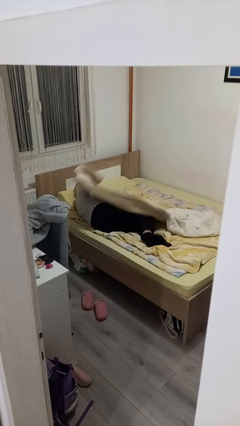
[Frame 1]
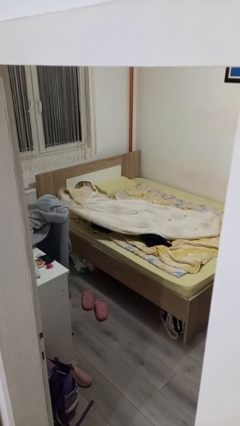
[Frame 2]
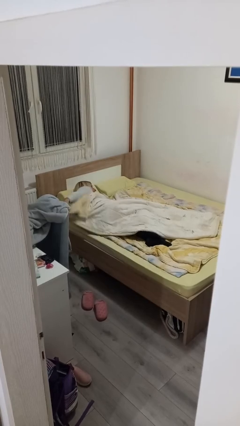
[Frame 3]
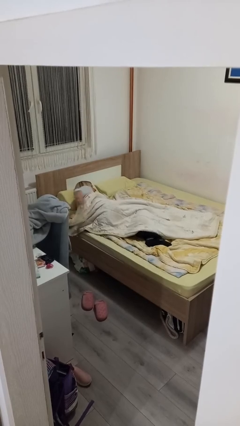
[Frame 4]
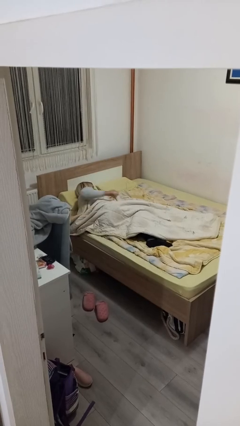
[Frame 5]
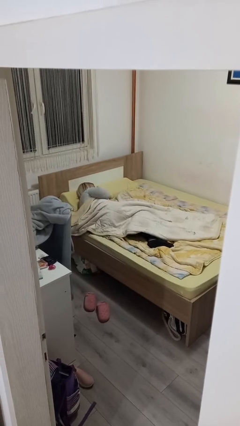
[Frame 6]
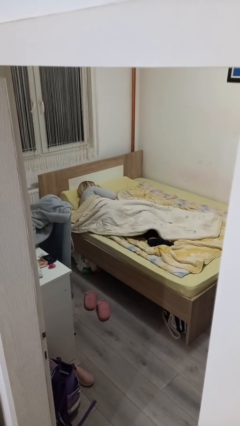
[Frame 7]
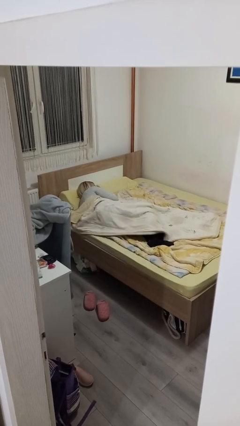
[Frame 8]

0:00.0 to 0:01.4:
person covers with bedsheets

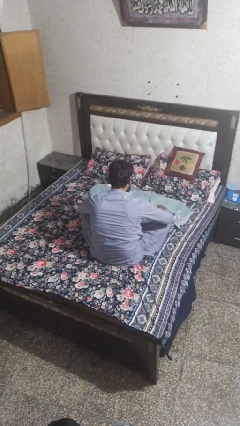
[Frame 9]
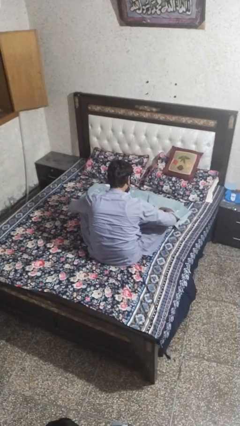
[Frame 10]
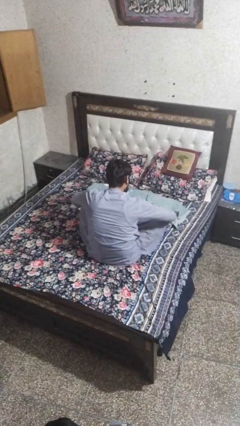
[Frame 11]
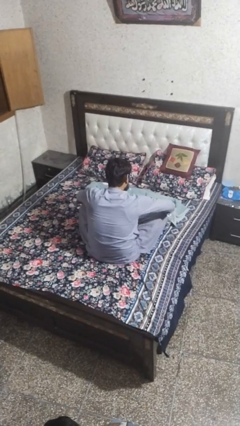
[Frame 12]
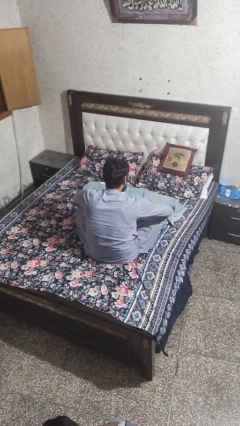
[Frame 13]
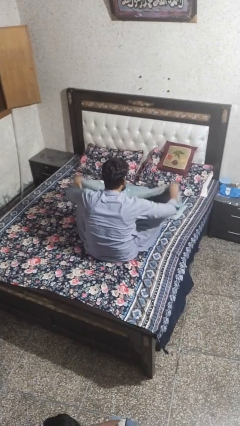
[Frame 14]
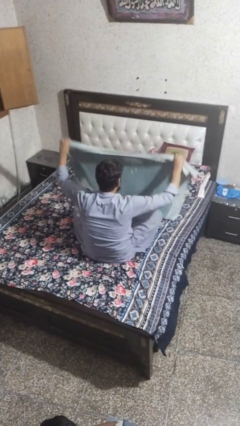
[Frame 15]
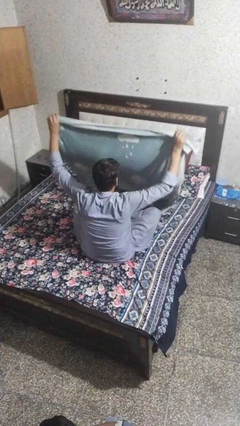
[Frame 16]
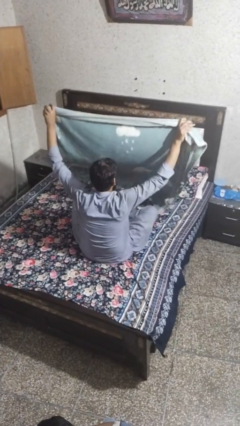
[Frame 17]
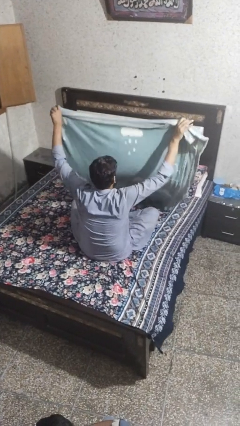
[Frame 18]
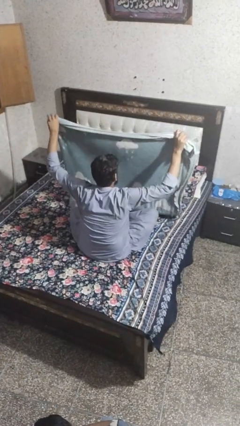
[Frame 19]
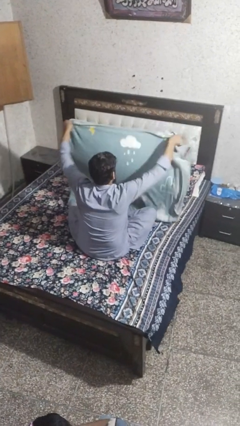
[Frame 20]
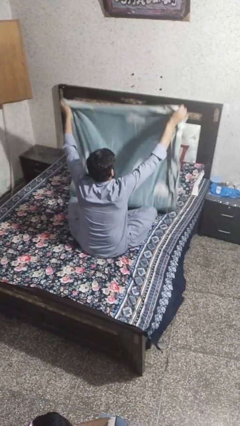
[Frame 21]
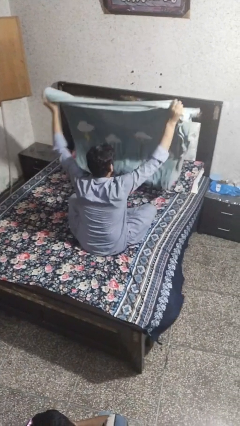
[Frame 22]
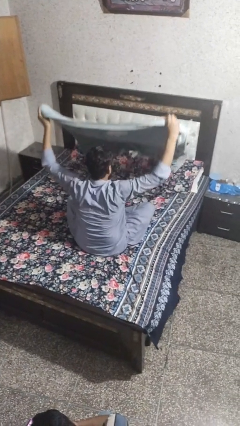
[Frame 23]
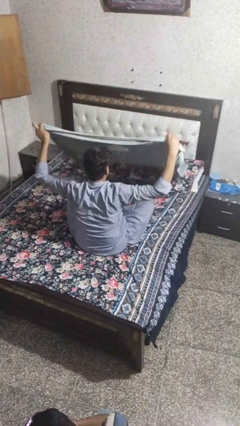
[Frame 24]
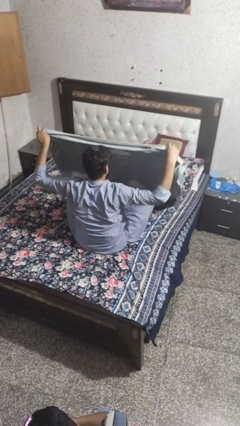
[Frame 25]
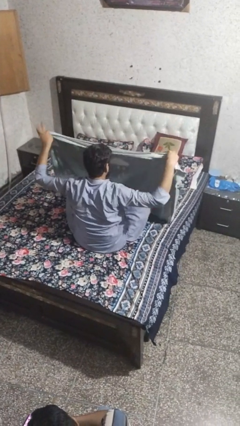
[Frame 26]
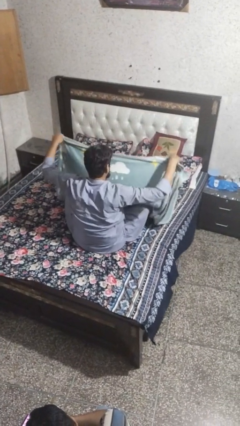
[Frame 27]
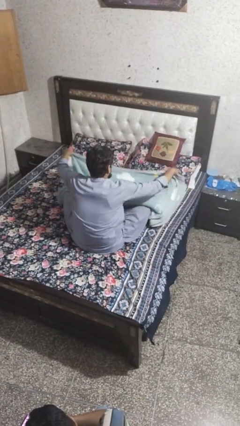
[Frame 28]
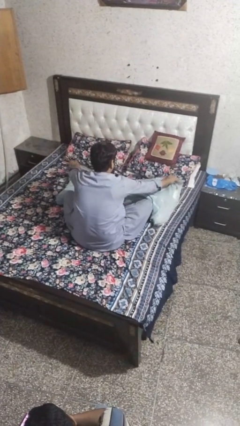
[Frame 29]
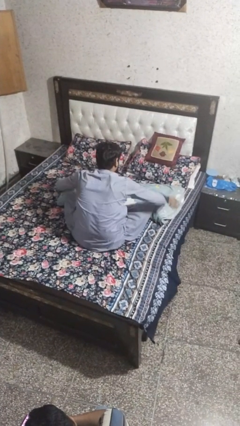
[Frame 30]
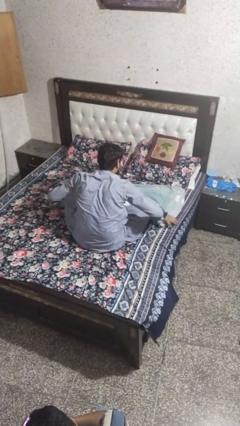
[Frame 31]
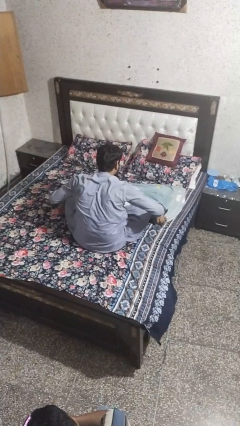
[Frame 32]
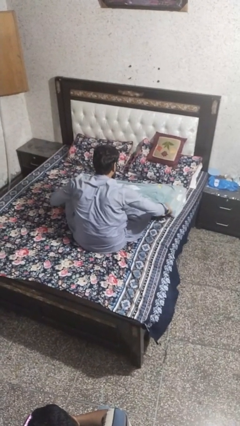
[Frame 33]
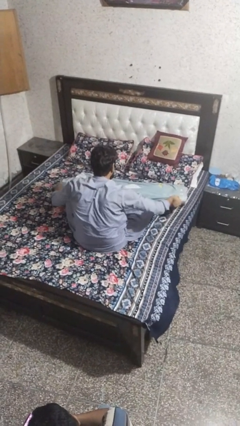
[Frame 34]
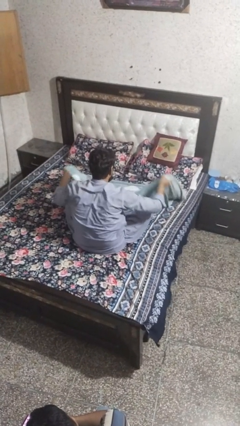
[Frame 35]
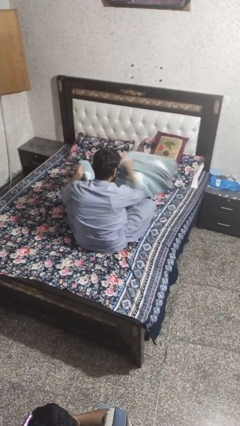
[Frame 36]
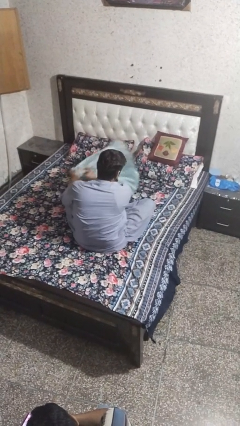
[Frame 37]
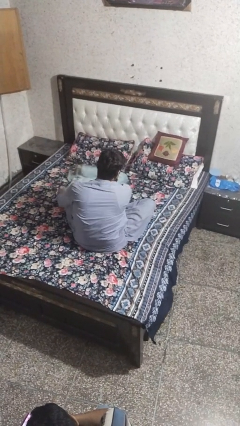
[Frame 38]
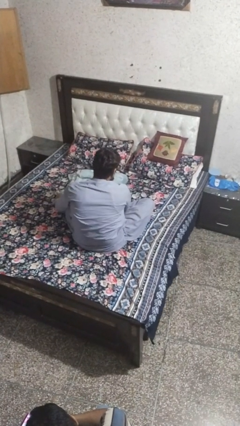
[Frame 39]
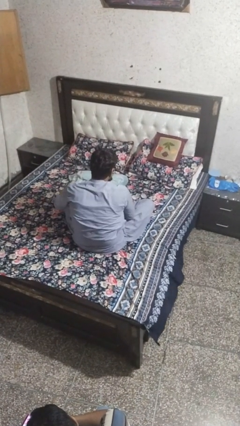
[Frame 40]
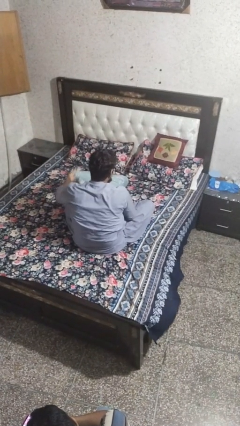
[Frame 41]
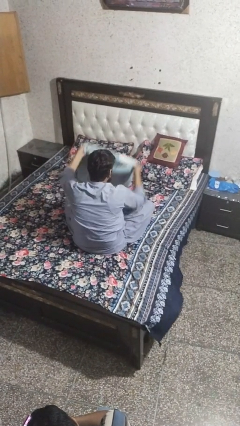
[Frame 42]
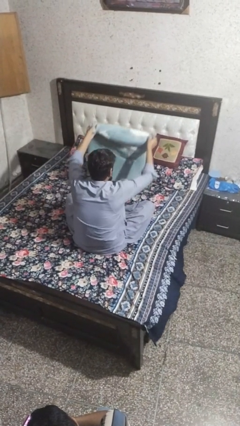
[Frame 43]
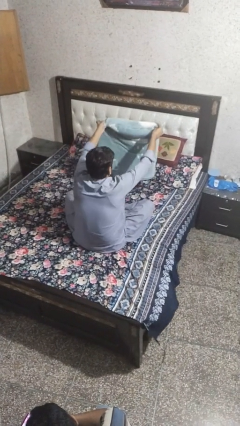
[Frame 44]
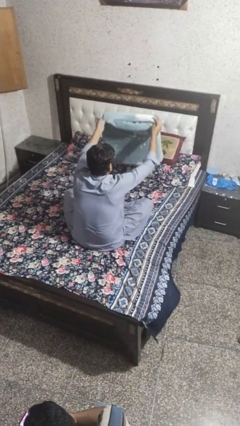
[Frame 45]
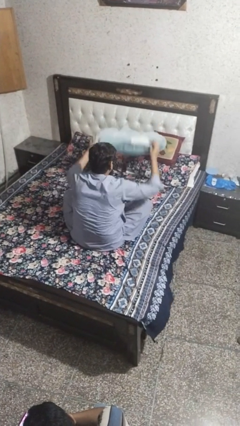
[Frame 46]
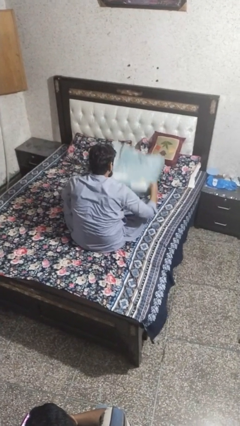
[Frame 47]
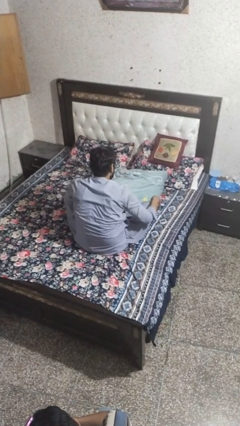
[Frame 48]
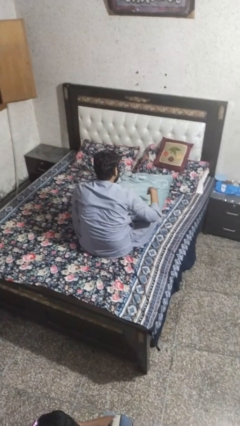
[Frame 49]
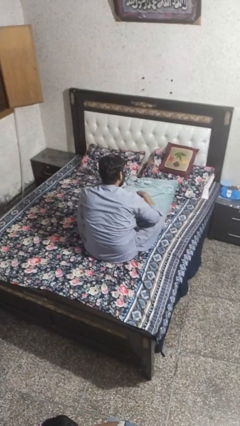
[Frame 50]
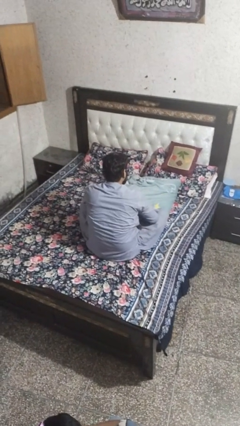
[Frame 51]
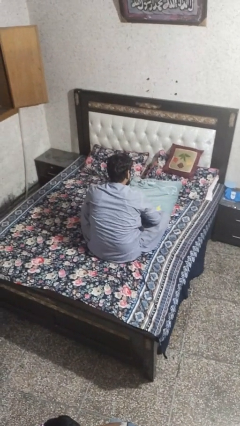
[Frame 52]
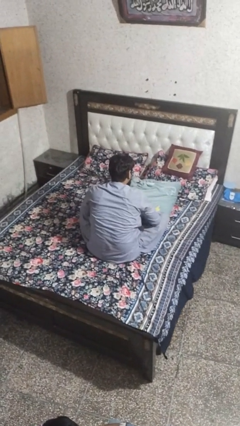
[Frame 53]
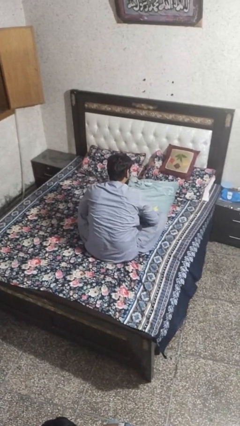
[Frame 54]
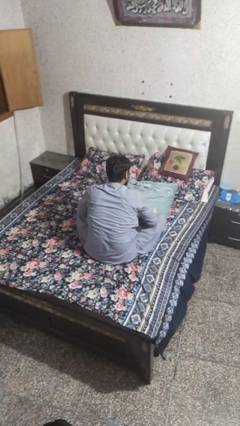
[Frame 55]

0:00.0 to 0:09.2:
person folds blanket

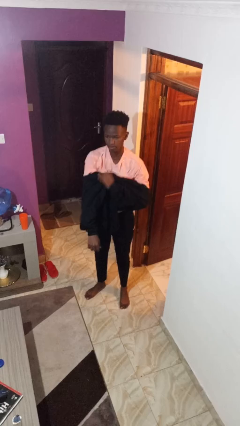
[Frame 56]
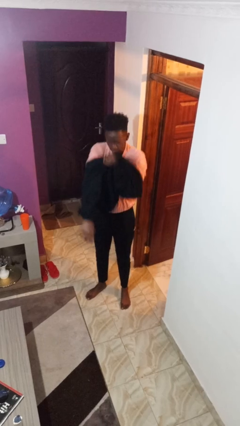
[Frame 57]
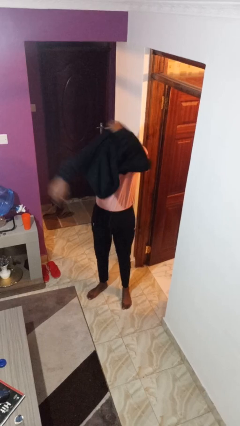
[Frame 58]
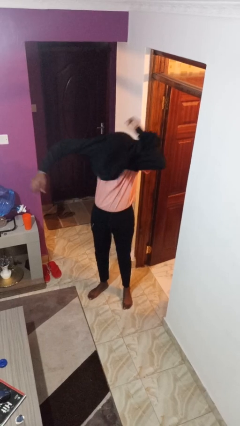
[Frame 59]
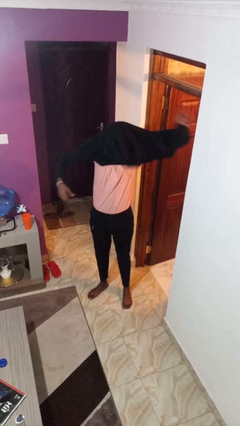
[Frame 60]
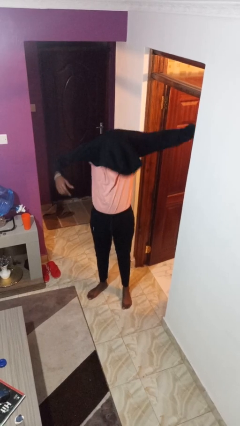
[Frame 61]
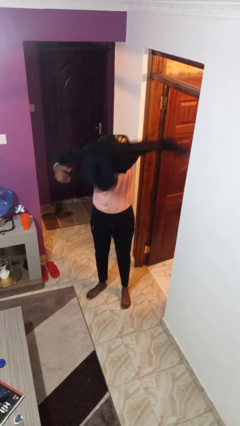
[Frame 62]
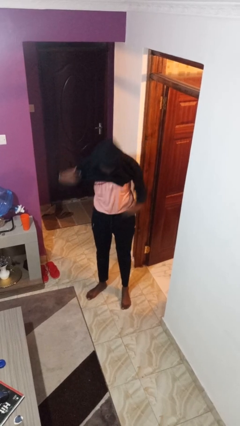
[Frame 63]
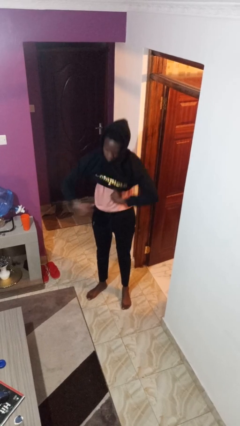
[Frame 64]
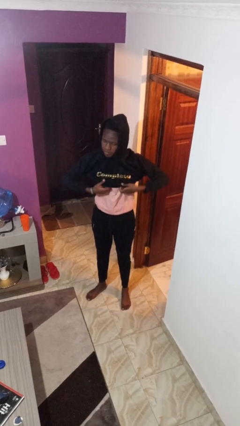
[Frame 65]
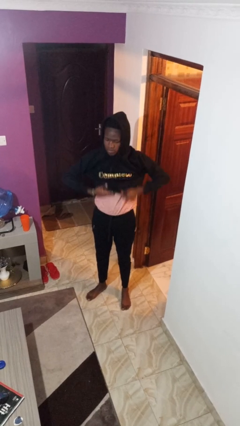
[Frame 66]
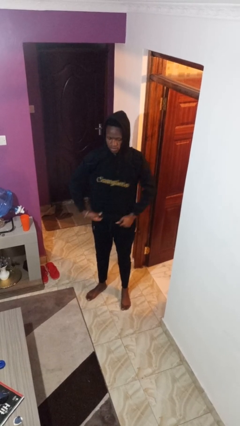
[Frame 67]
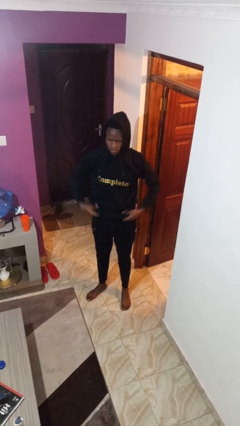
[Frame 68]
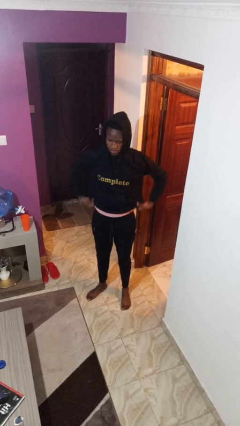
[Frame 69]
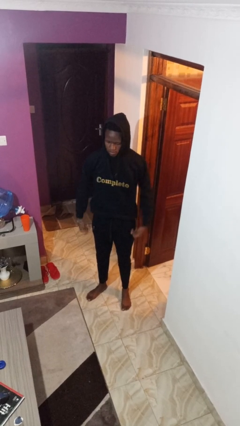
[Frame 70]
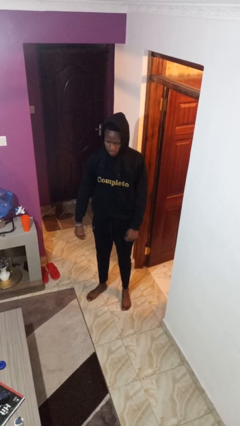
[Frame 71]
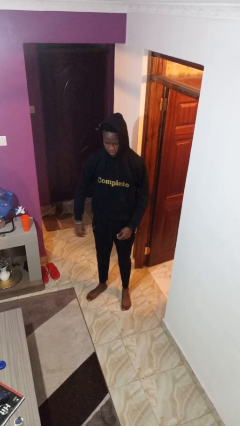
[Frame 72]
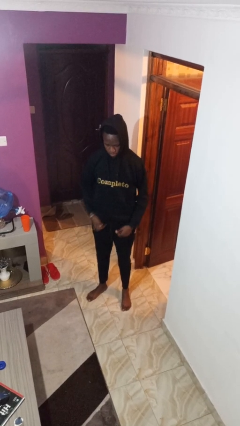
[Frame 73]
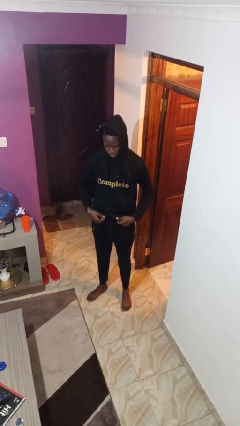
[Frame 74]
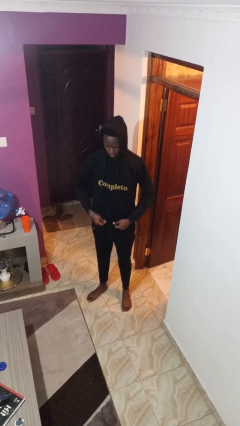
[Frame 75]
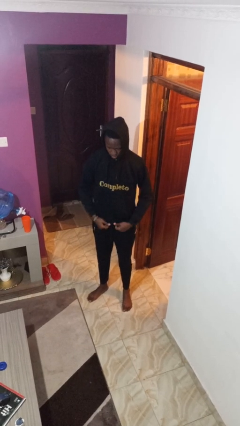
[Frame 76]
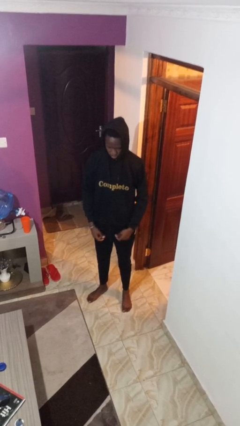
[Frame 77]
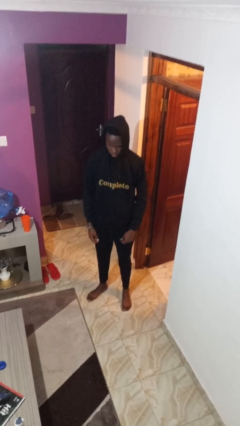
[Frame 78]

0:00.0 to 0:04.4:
person puts on hoodie

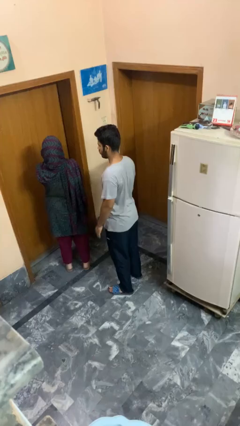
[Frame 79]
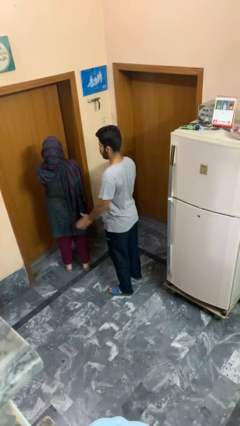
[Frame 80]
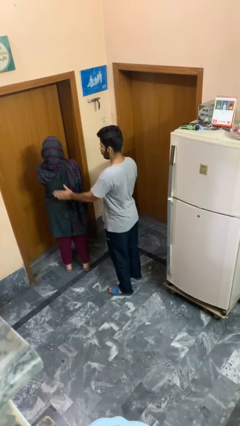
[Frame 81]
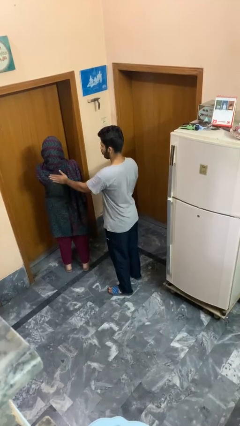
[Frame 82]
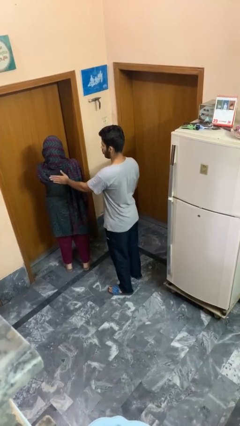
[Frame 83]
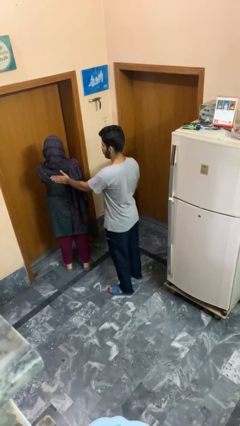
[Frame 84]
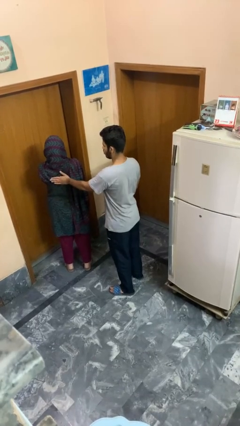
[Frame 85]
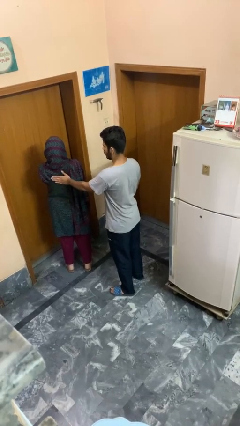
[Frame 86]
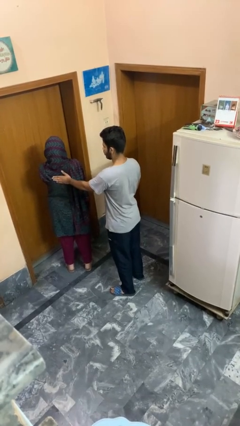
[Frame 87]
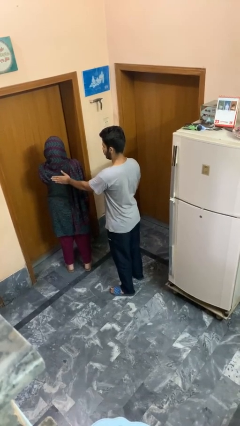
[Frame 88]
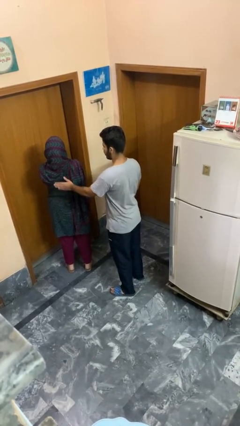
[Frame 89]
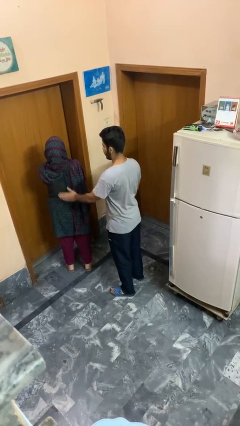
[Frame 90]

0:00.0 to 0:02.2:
person touches back of person

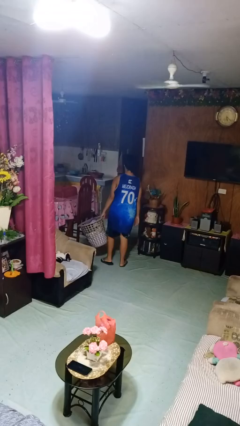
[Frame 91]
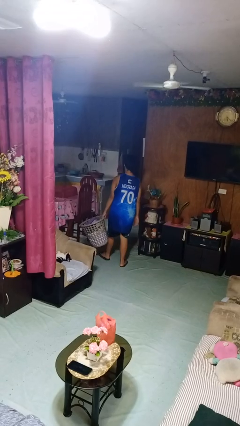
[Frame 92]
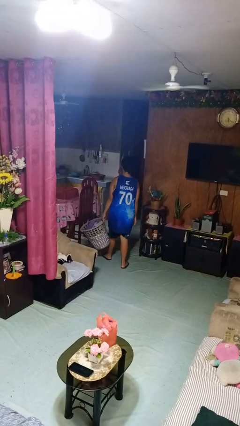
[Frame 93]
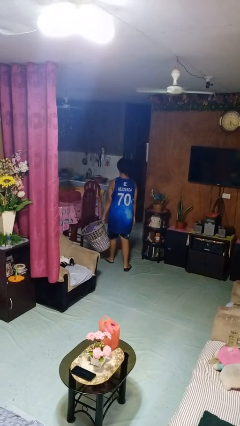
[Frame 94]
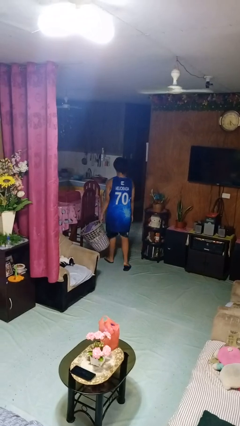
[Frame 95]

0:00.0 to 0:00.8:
person carries laundry basket
